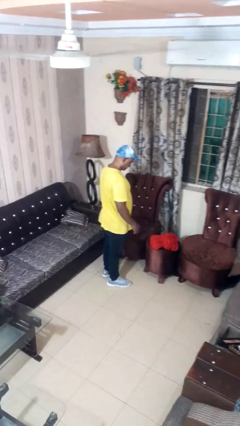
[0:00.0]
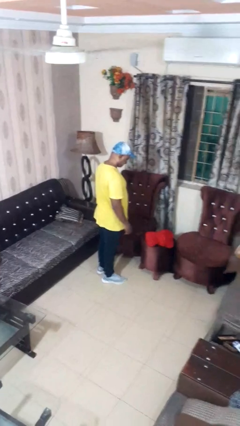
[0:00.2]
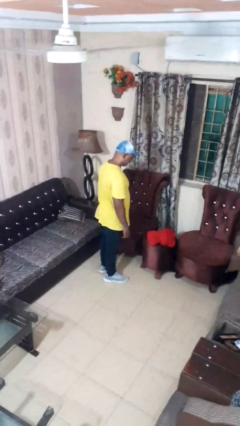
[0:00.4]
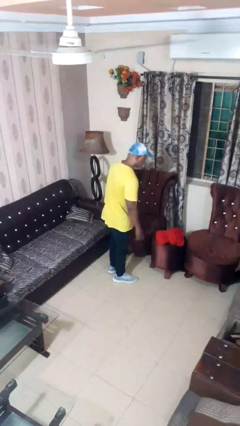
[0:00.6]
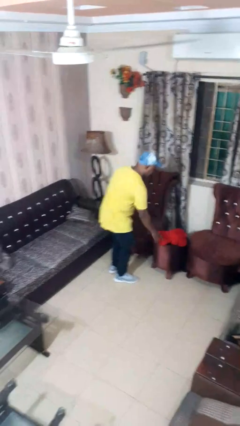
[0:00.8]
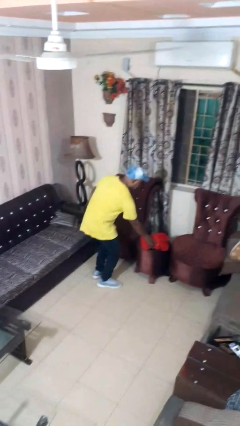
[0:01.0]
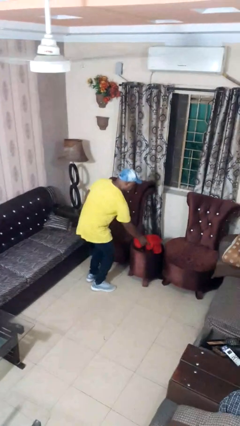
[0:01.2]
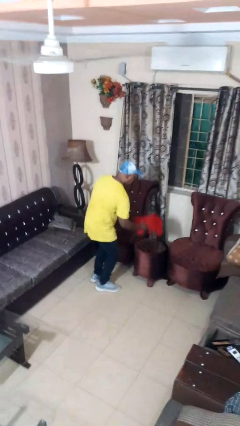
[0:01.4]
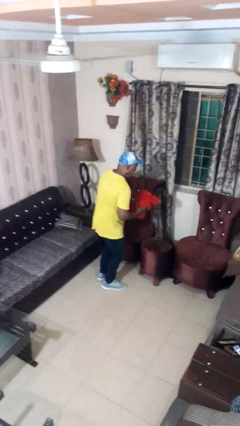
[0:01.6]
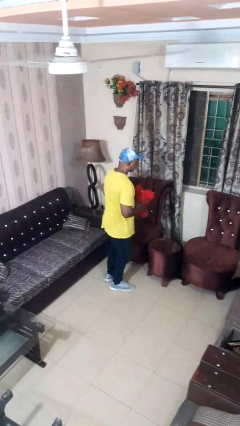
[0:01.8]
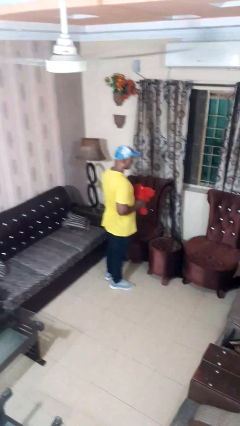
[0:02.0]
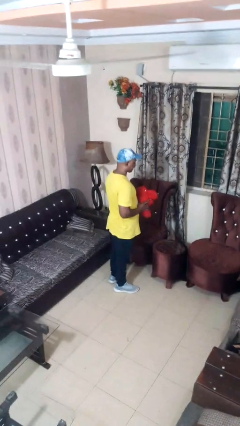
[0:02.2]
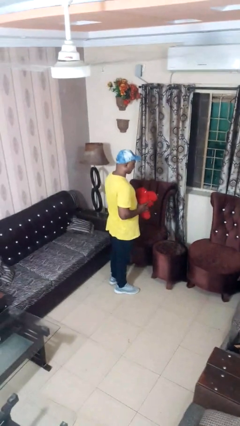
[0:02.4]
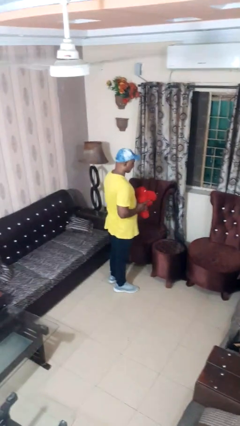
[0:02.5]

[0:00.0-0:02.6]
person picks up object from table

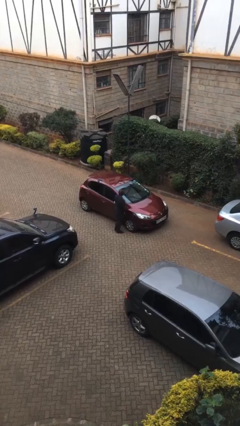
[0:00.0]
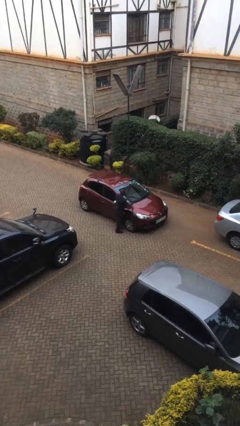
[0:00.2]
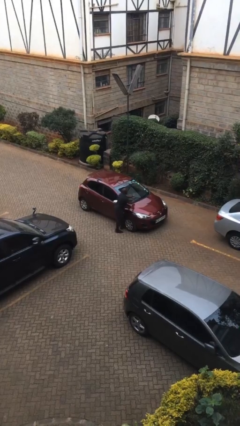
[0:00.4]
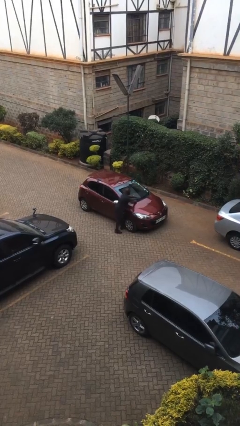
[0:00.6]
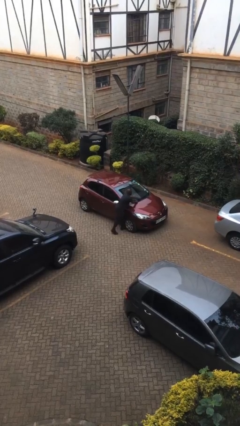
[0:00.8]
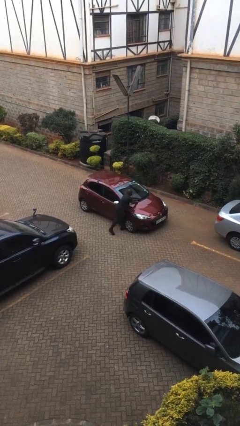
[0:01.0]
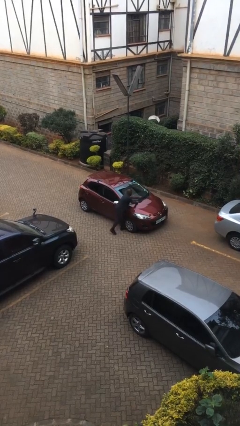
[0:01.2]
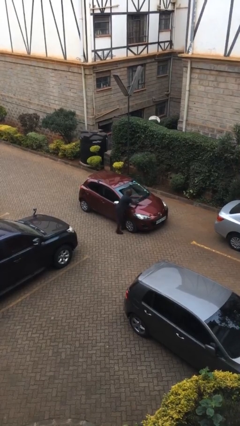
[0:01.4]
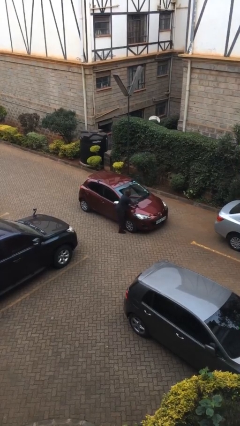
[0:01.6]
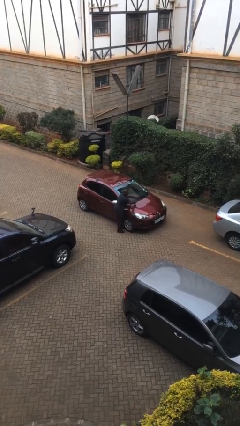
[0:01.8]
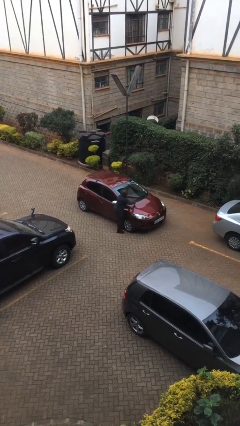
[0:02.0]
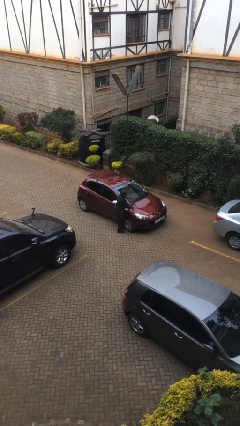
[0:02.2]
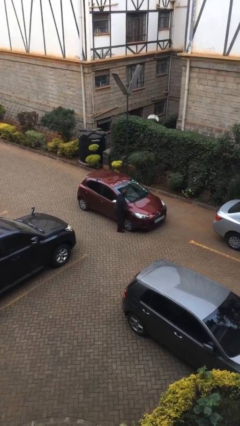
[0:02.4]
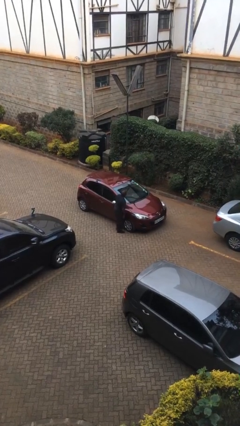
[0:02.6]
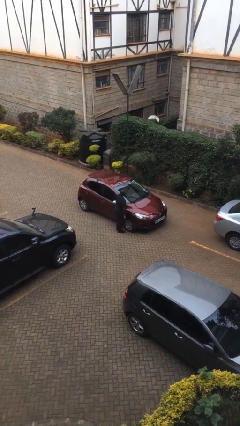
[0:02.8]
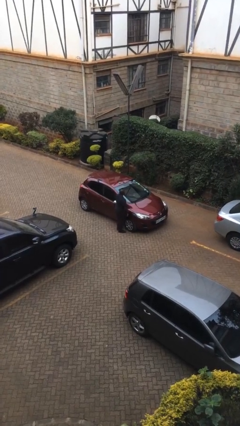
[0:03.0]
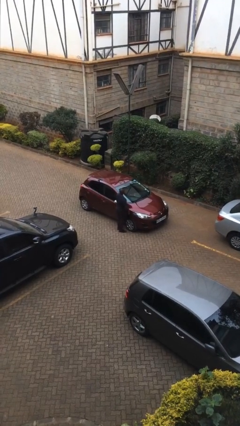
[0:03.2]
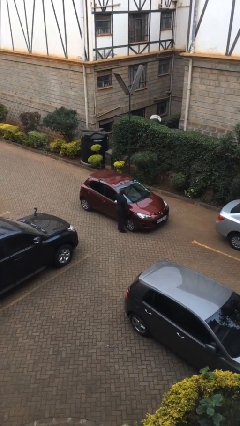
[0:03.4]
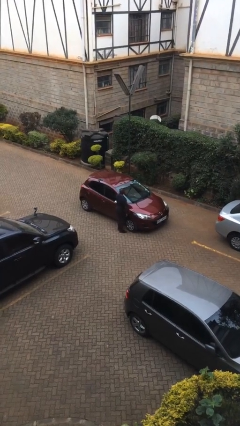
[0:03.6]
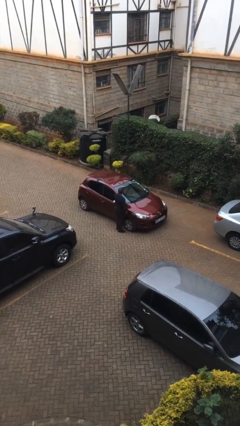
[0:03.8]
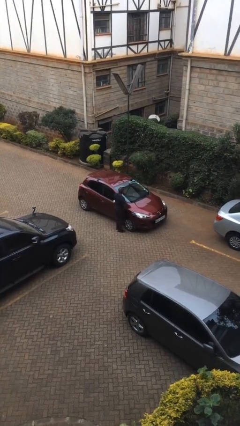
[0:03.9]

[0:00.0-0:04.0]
person flips up car wipers

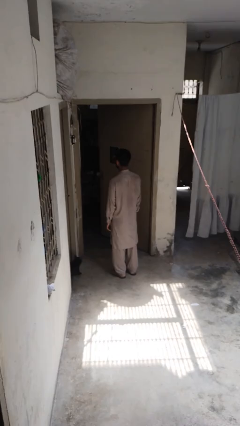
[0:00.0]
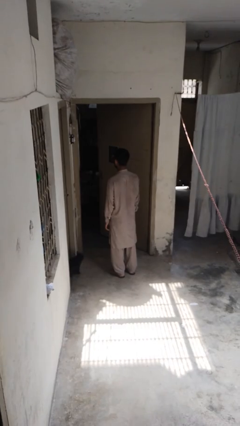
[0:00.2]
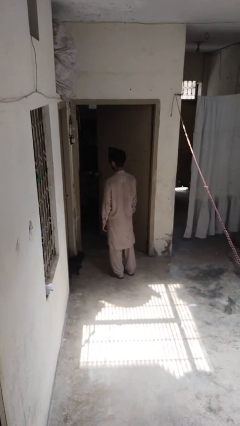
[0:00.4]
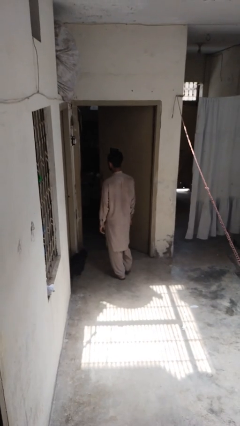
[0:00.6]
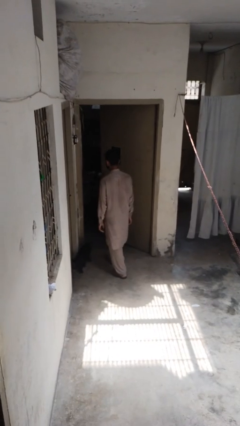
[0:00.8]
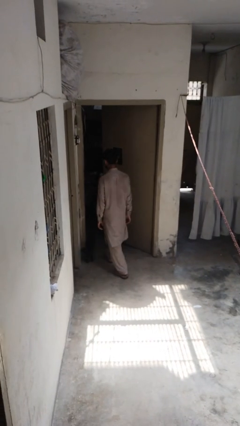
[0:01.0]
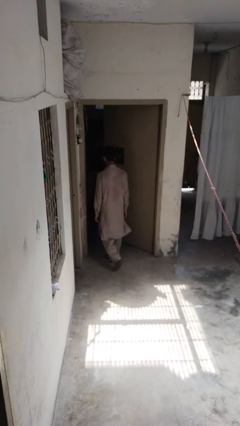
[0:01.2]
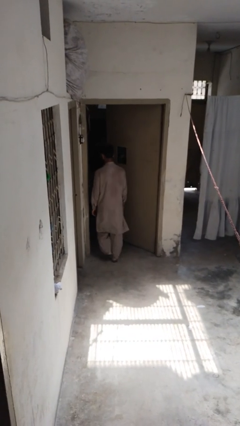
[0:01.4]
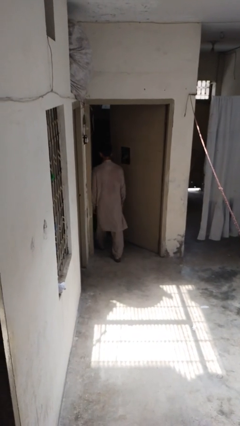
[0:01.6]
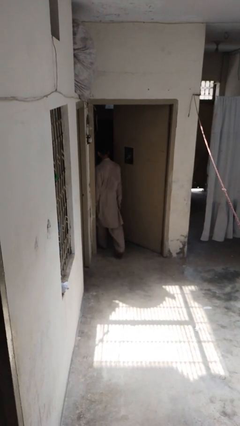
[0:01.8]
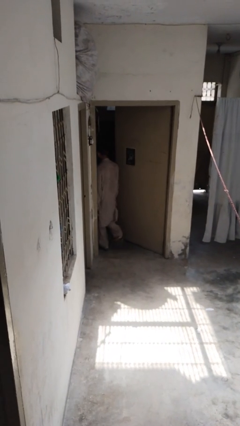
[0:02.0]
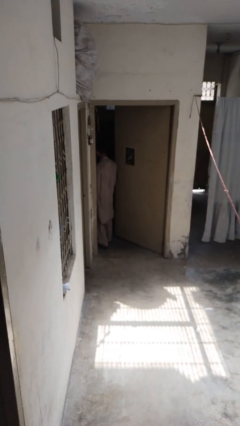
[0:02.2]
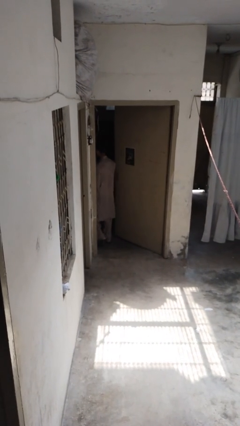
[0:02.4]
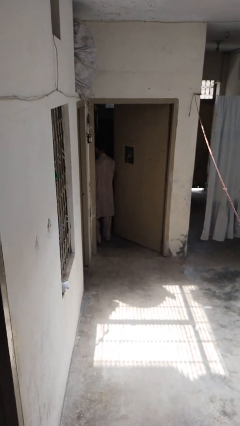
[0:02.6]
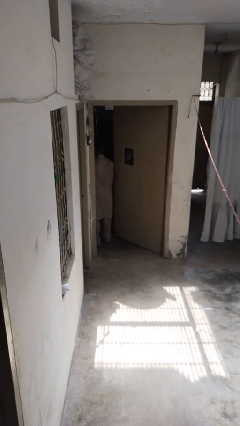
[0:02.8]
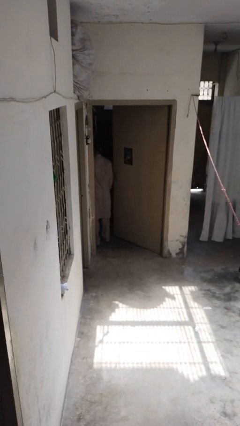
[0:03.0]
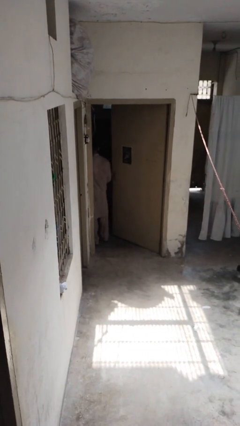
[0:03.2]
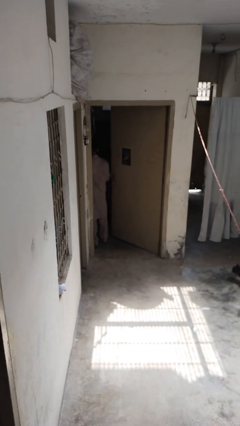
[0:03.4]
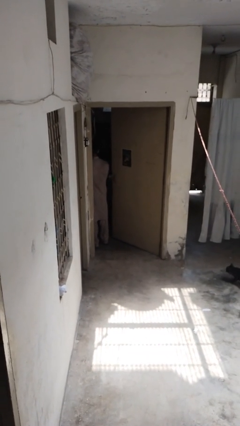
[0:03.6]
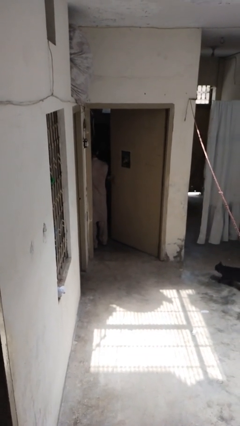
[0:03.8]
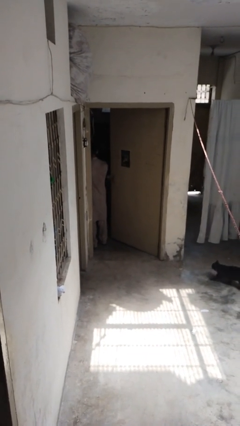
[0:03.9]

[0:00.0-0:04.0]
person bumps into wall

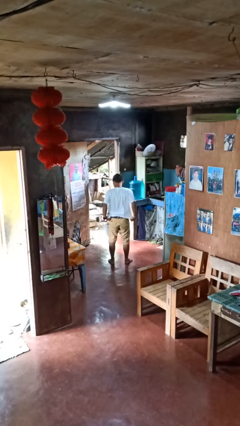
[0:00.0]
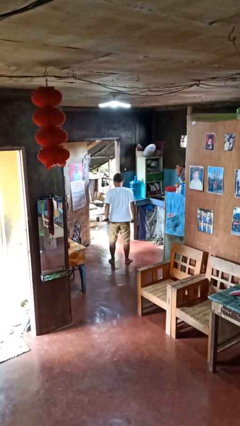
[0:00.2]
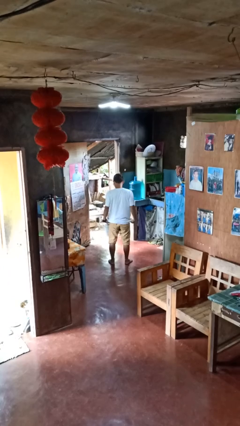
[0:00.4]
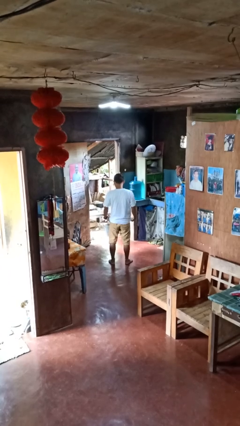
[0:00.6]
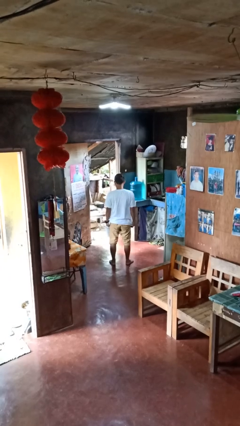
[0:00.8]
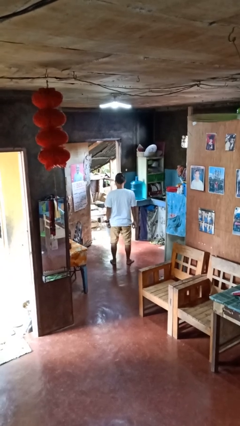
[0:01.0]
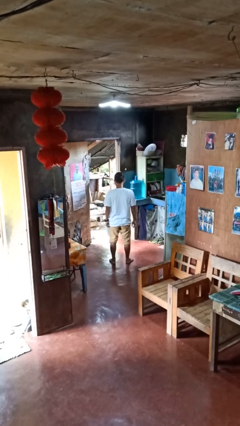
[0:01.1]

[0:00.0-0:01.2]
person untucks shirt

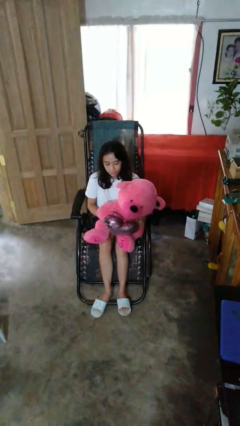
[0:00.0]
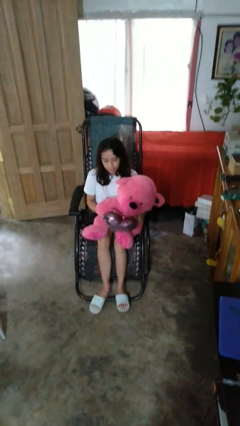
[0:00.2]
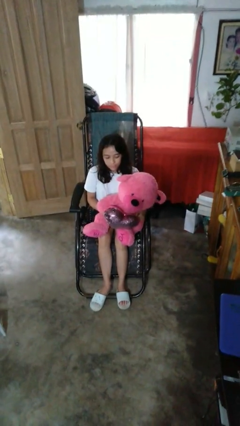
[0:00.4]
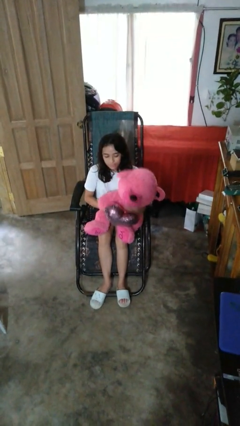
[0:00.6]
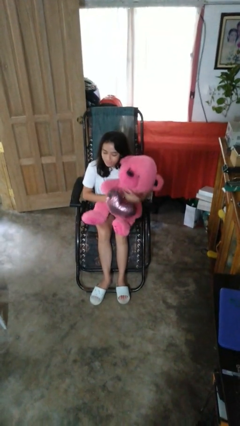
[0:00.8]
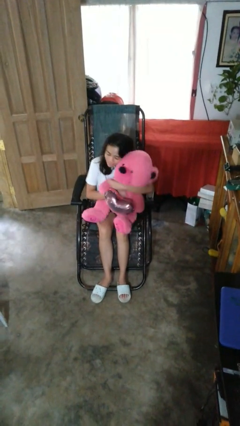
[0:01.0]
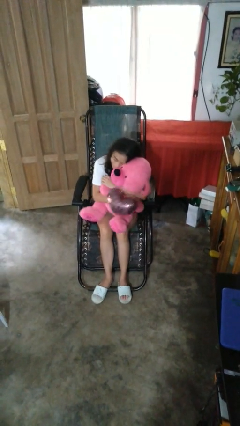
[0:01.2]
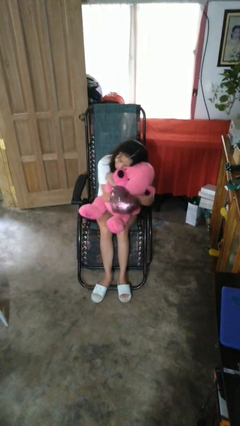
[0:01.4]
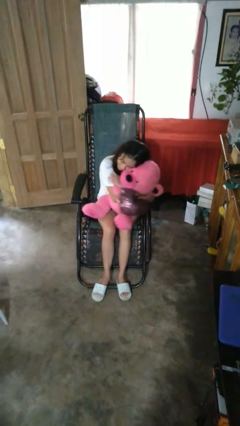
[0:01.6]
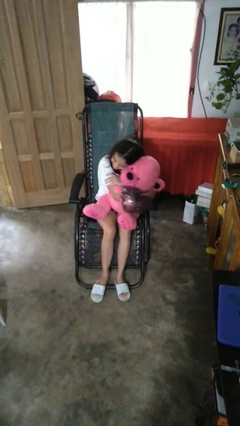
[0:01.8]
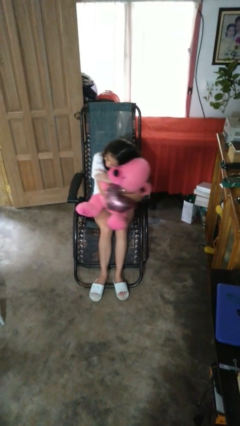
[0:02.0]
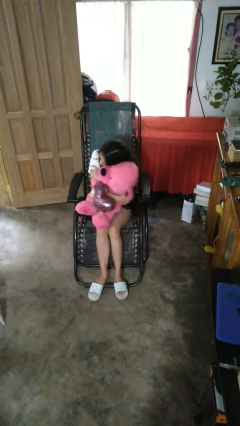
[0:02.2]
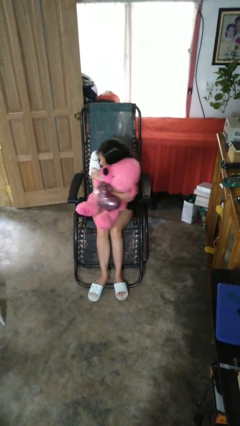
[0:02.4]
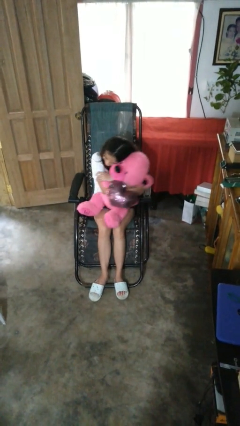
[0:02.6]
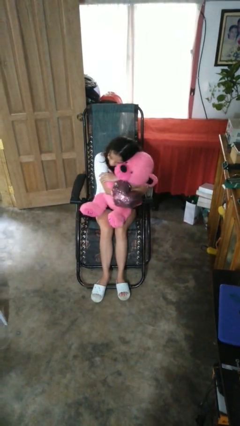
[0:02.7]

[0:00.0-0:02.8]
person hugs stuffed animal

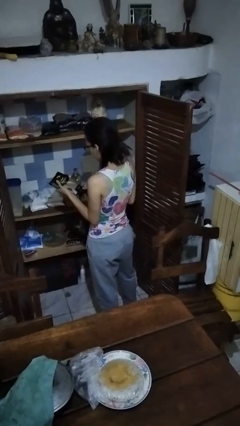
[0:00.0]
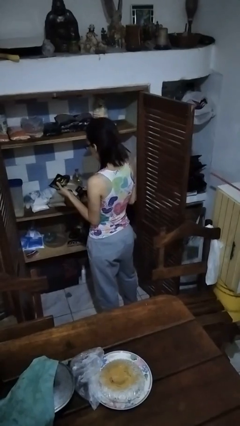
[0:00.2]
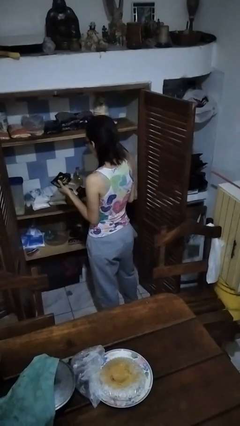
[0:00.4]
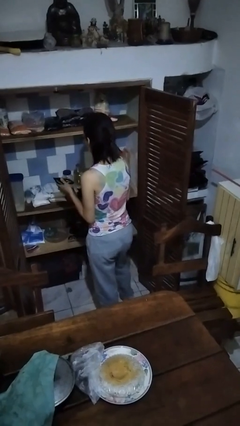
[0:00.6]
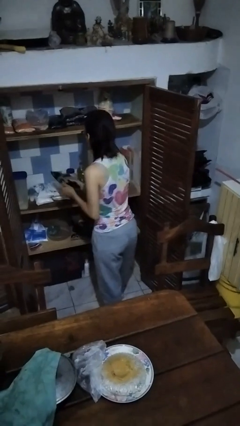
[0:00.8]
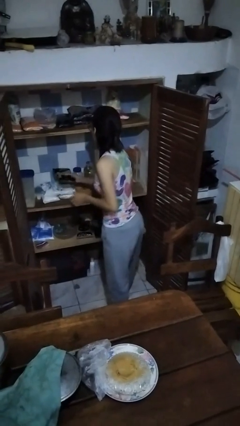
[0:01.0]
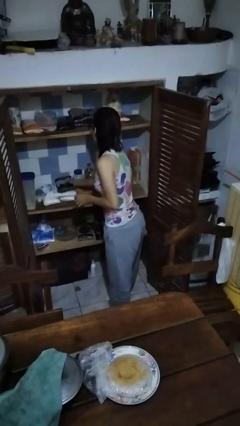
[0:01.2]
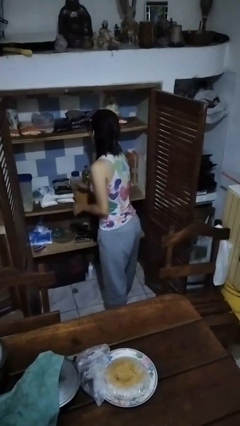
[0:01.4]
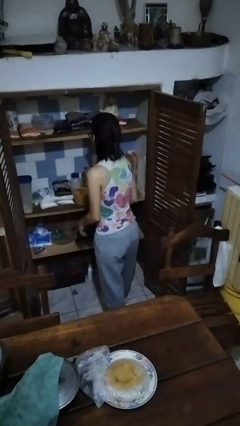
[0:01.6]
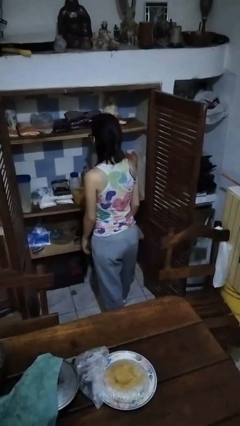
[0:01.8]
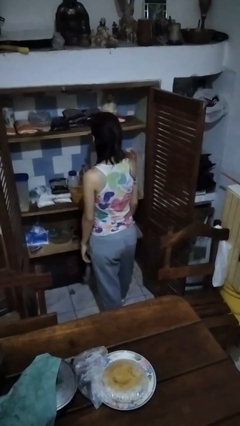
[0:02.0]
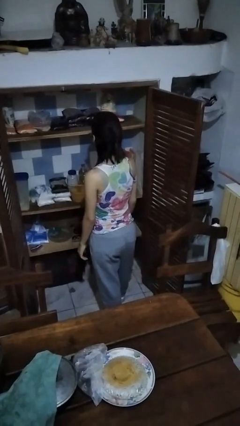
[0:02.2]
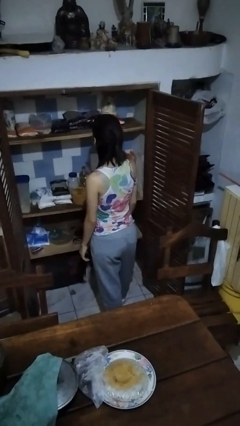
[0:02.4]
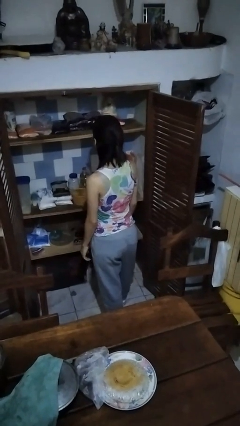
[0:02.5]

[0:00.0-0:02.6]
person puts object in cabinet

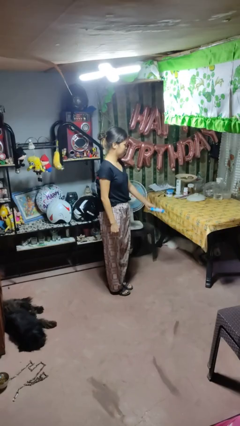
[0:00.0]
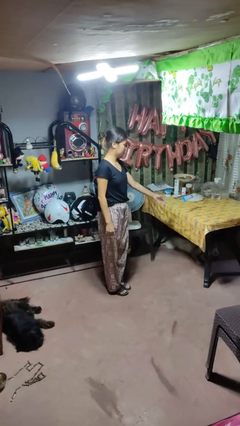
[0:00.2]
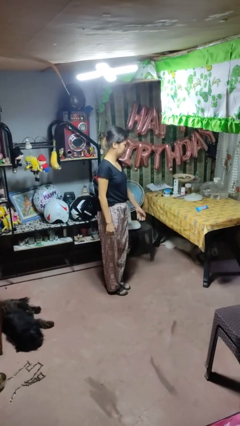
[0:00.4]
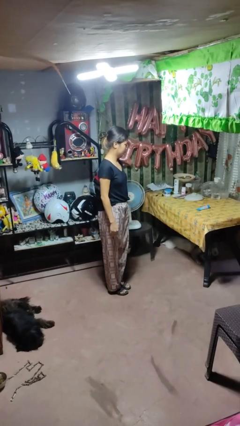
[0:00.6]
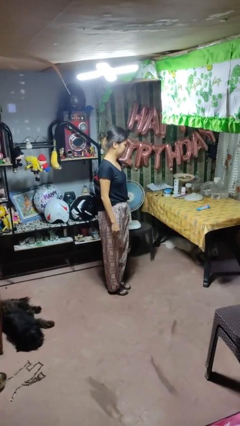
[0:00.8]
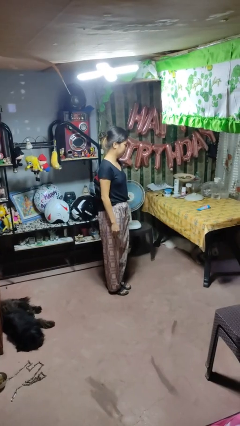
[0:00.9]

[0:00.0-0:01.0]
person throws object on table
